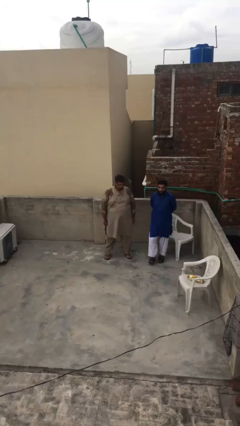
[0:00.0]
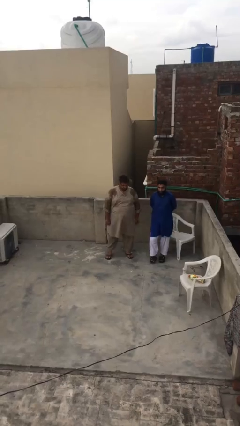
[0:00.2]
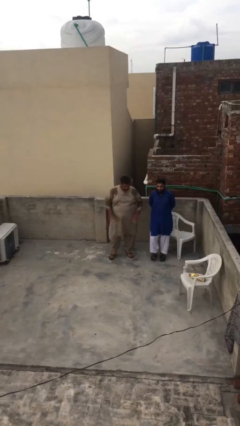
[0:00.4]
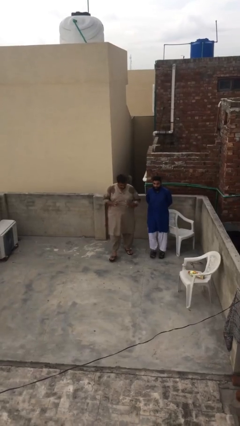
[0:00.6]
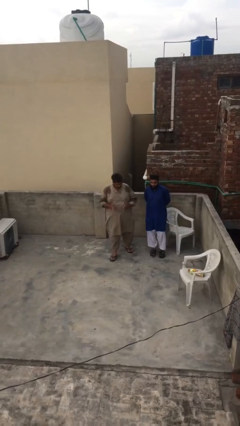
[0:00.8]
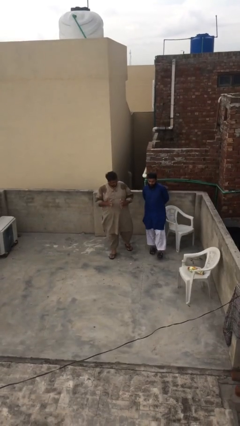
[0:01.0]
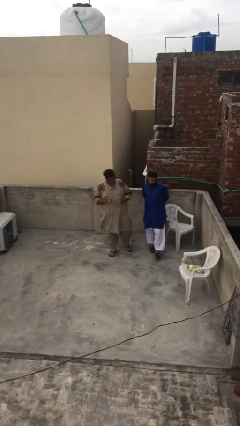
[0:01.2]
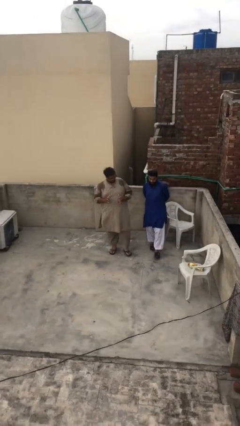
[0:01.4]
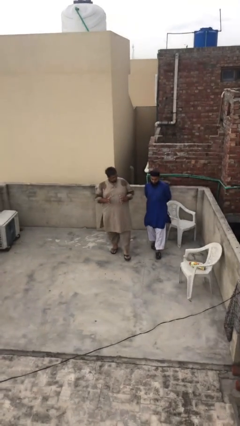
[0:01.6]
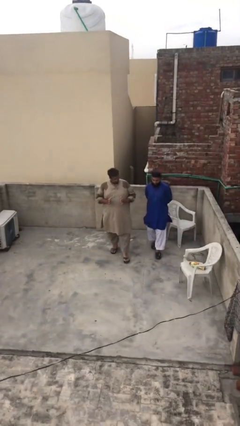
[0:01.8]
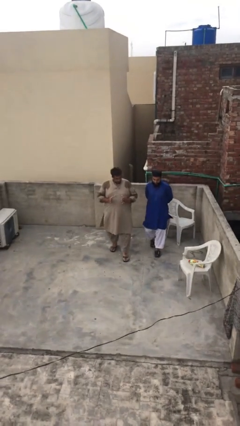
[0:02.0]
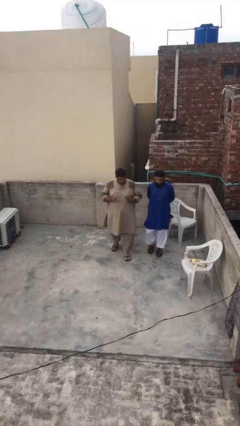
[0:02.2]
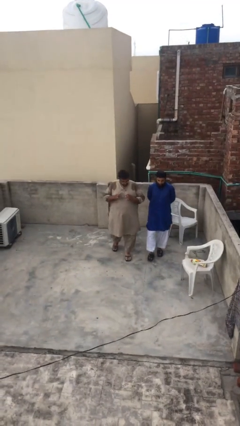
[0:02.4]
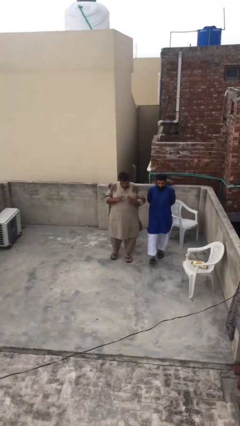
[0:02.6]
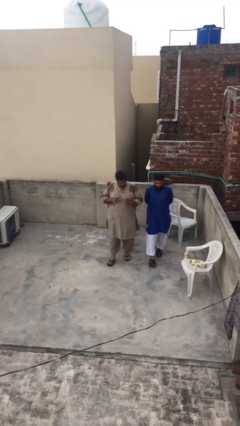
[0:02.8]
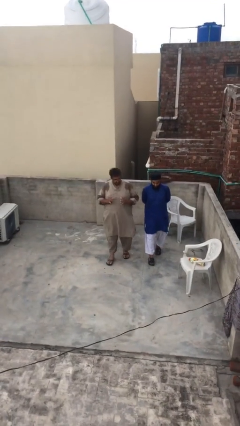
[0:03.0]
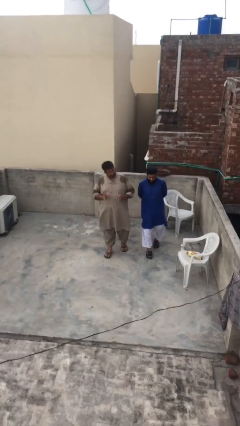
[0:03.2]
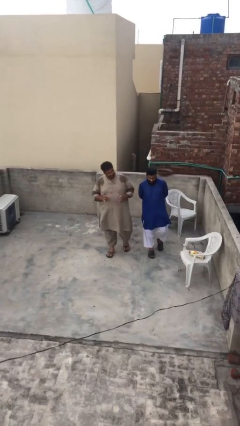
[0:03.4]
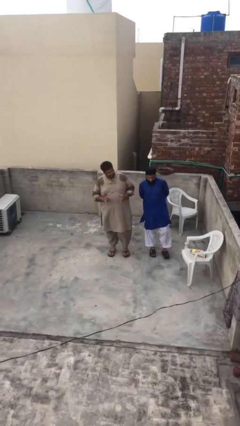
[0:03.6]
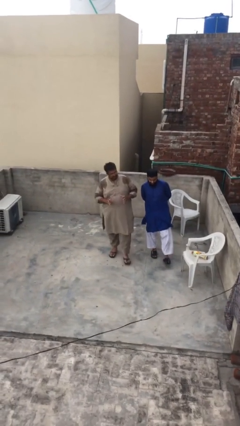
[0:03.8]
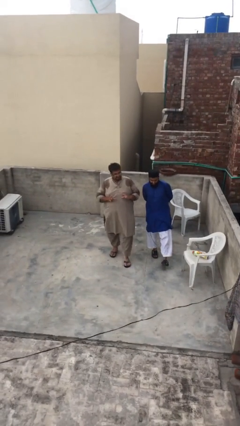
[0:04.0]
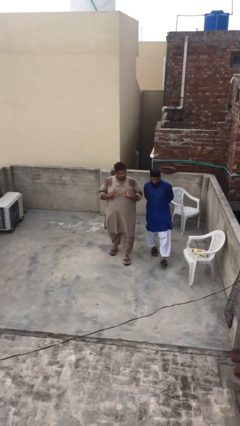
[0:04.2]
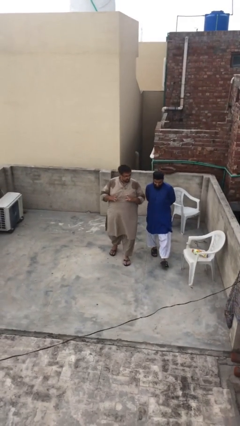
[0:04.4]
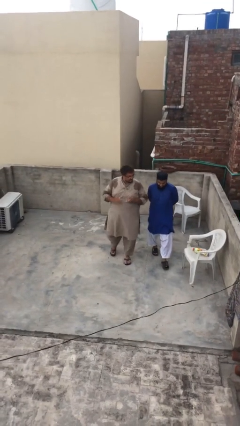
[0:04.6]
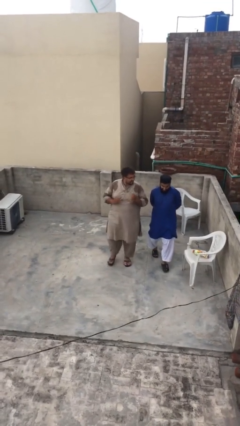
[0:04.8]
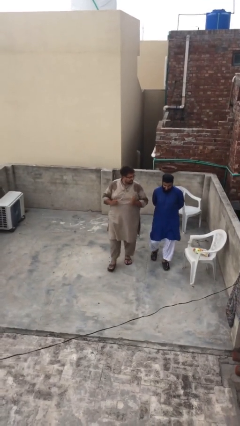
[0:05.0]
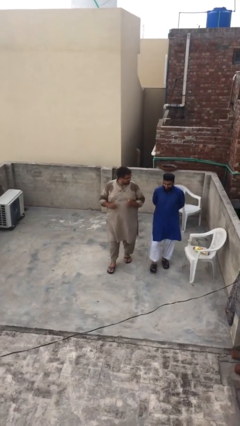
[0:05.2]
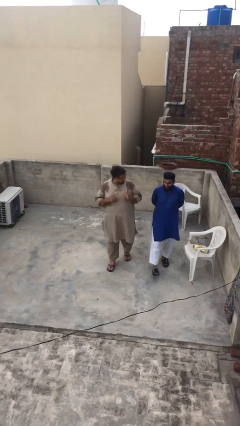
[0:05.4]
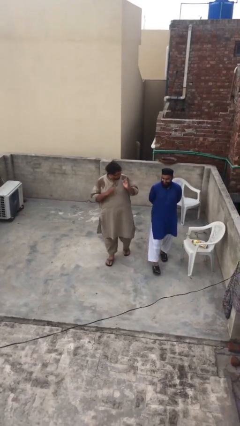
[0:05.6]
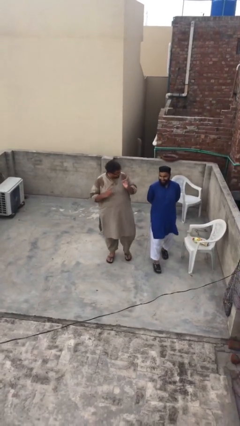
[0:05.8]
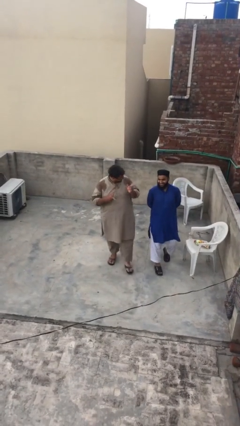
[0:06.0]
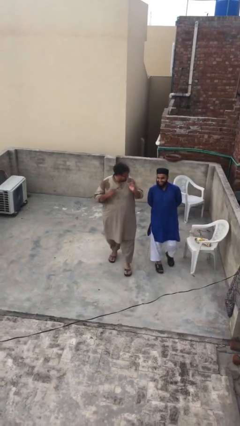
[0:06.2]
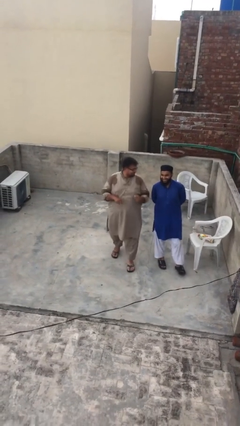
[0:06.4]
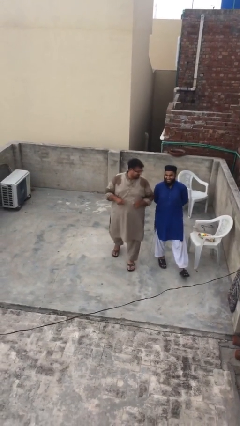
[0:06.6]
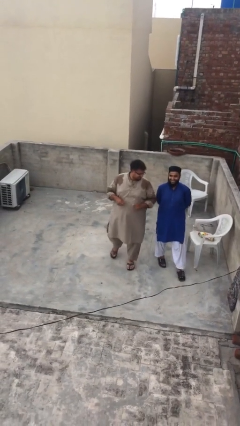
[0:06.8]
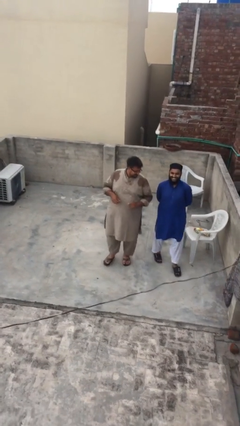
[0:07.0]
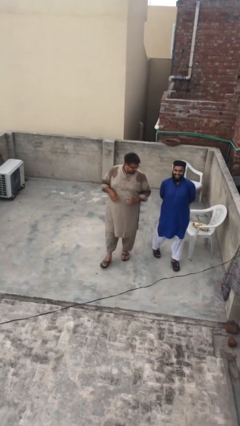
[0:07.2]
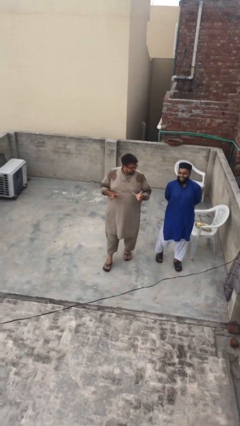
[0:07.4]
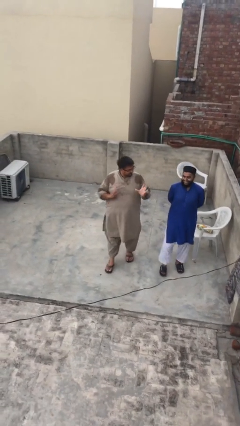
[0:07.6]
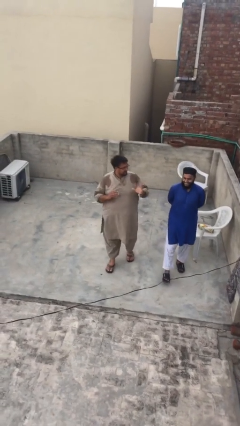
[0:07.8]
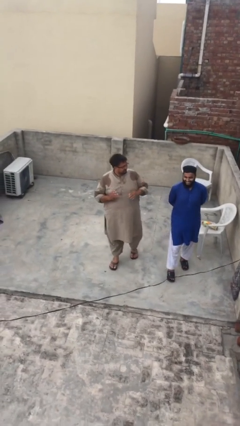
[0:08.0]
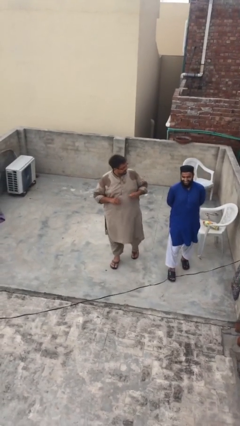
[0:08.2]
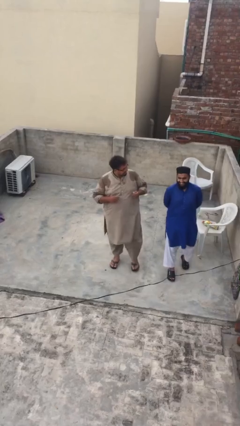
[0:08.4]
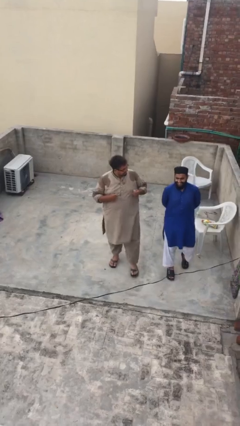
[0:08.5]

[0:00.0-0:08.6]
person talks to person

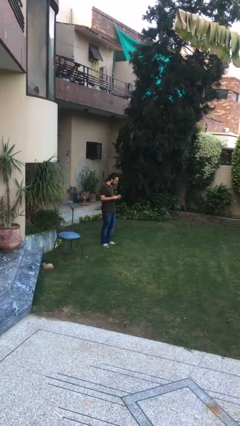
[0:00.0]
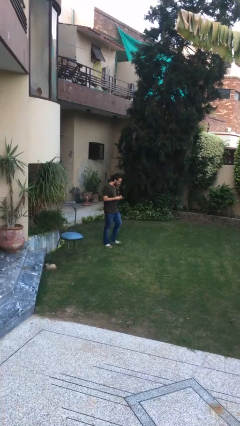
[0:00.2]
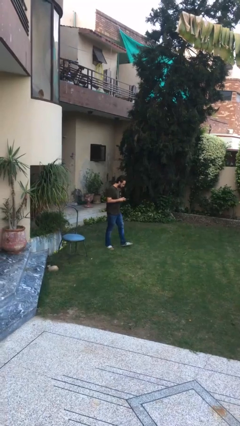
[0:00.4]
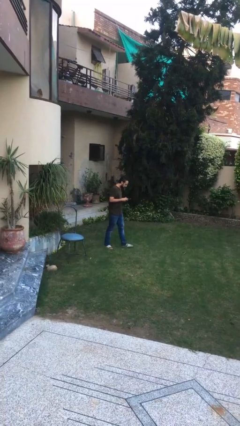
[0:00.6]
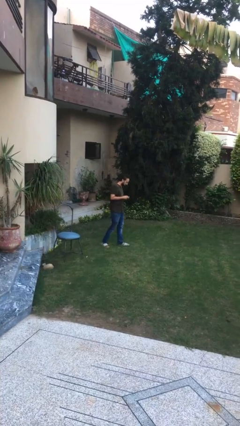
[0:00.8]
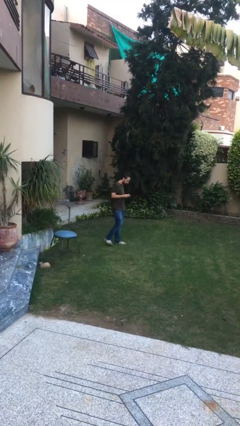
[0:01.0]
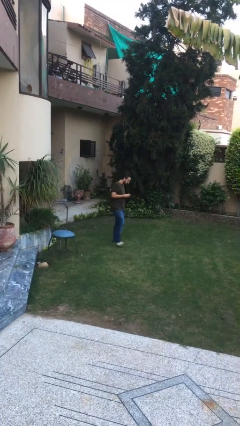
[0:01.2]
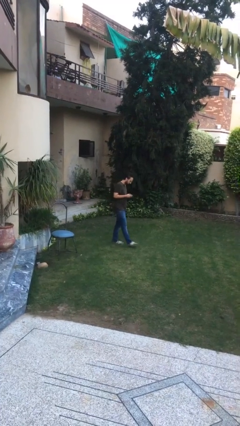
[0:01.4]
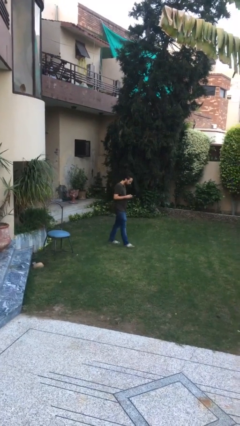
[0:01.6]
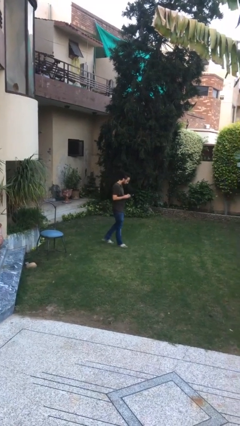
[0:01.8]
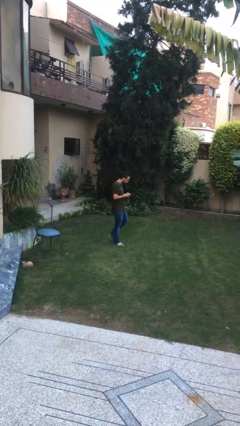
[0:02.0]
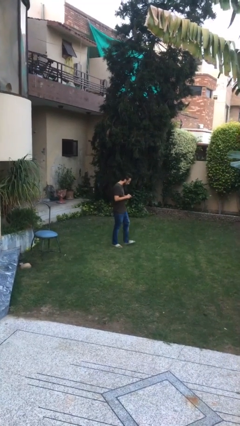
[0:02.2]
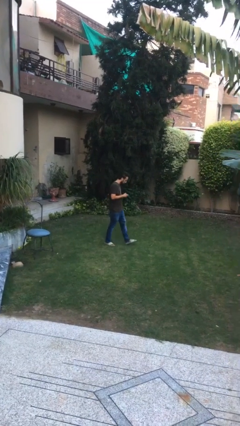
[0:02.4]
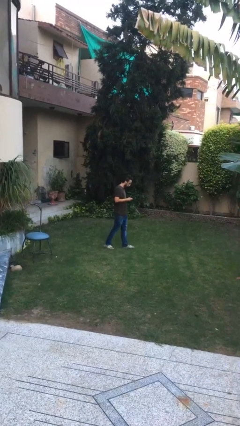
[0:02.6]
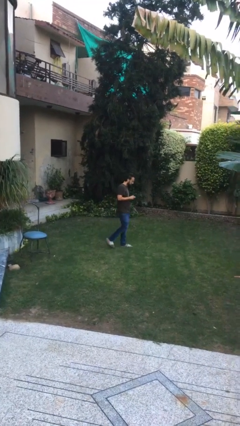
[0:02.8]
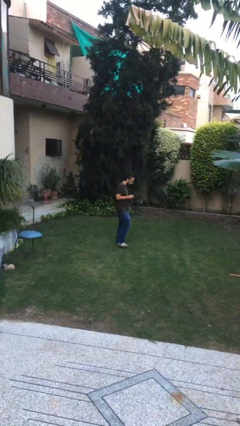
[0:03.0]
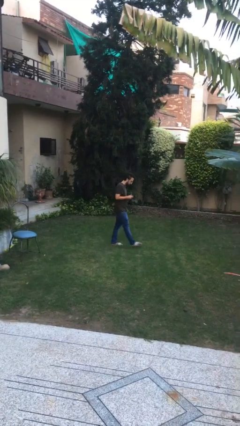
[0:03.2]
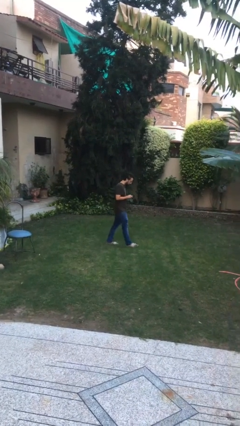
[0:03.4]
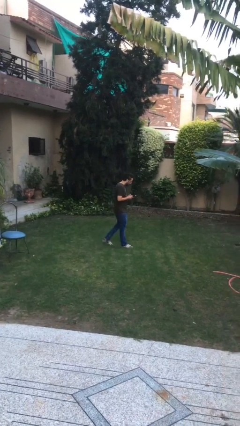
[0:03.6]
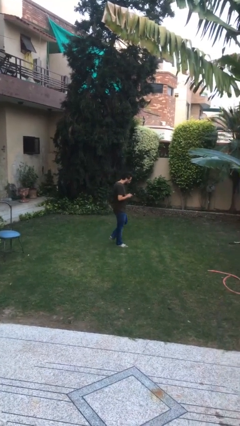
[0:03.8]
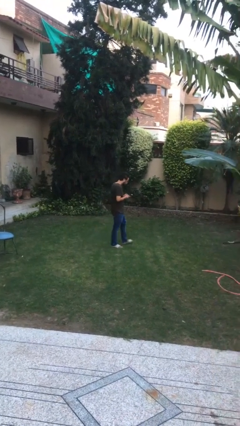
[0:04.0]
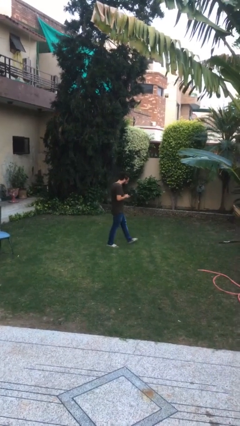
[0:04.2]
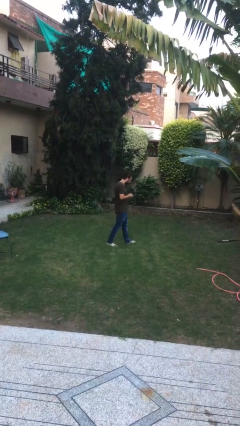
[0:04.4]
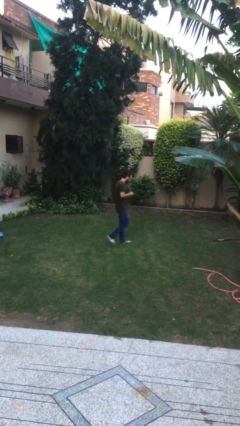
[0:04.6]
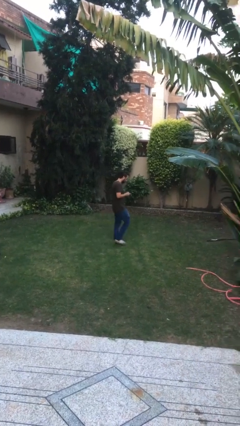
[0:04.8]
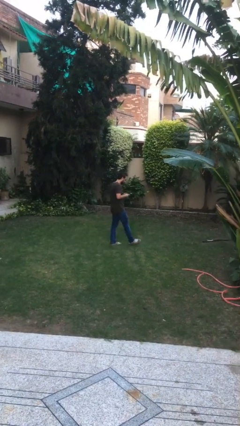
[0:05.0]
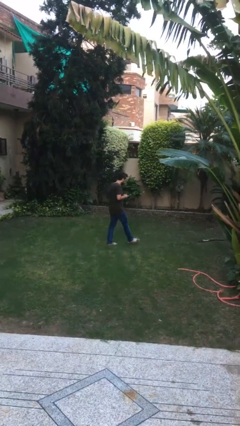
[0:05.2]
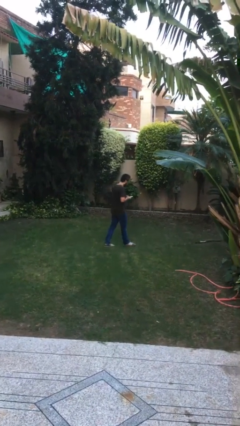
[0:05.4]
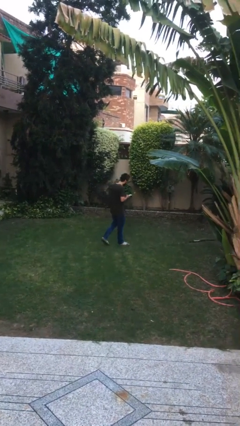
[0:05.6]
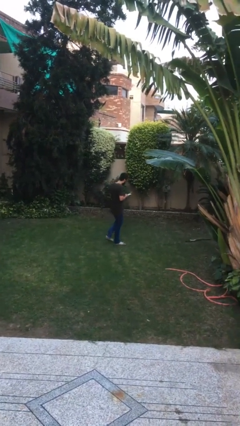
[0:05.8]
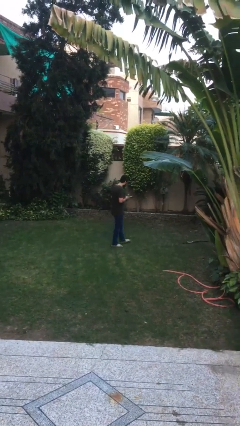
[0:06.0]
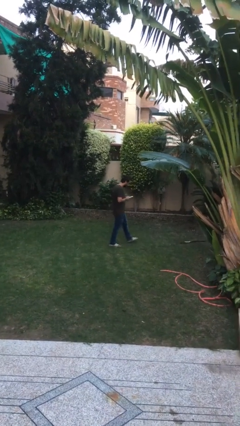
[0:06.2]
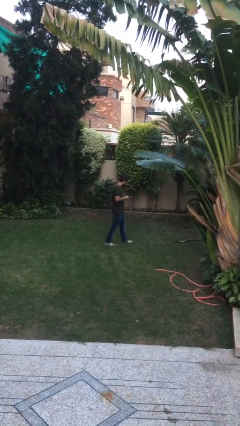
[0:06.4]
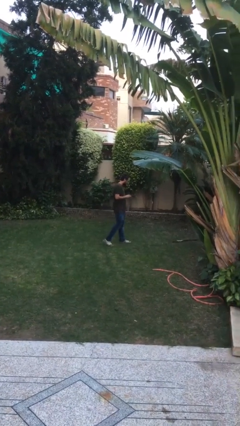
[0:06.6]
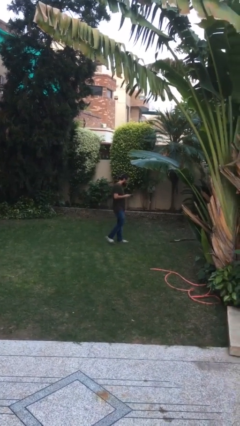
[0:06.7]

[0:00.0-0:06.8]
person texts on phone

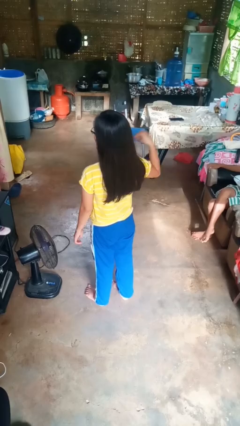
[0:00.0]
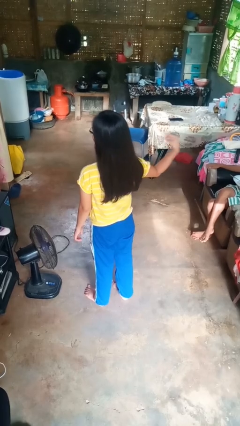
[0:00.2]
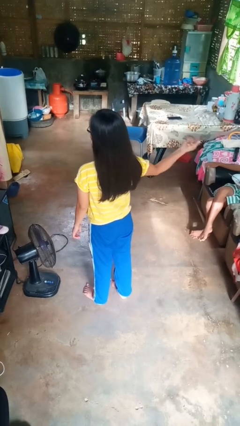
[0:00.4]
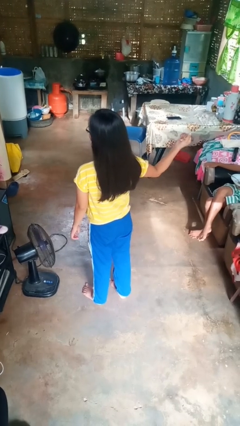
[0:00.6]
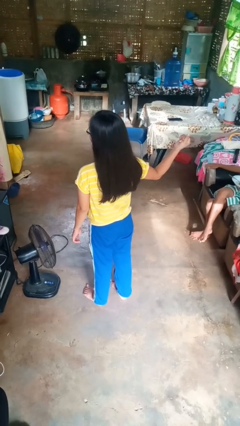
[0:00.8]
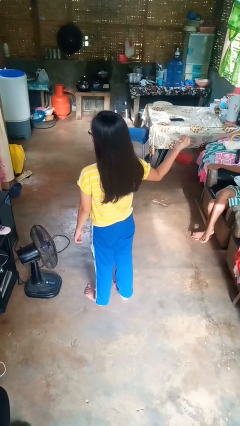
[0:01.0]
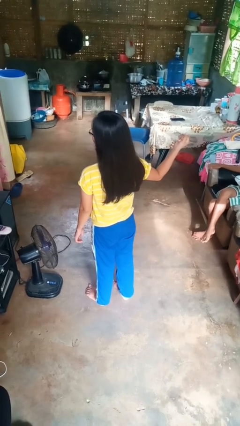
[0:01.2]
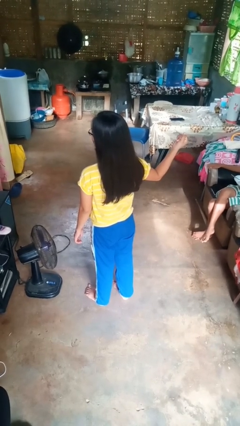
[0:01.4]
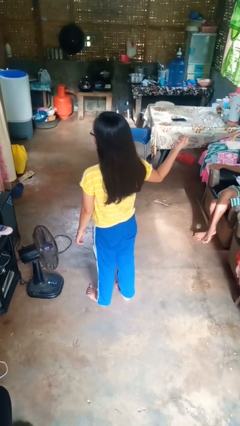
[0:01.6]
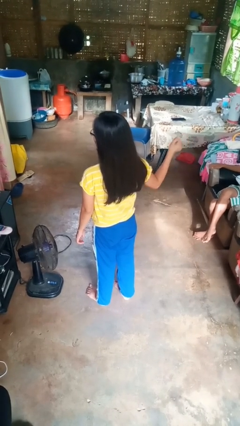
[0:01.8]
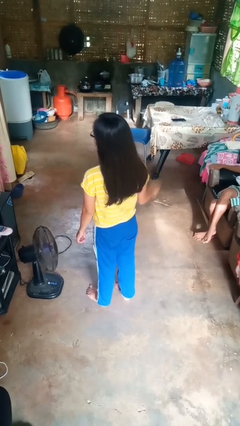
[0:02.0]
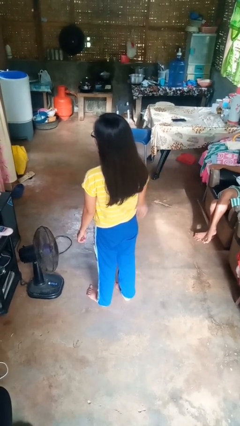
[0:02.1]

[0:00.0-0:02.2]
person snaps fingers

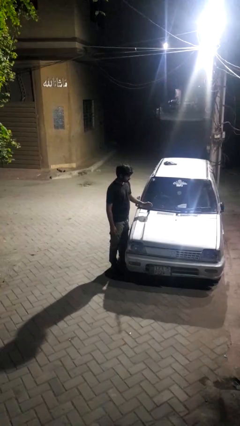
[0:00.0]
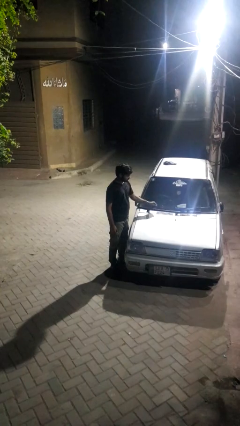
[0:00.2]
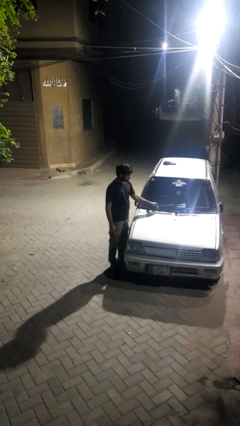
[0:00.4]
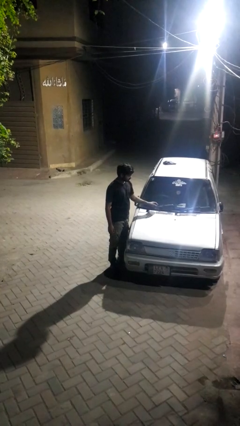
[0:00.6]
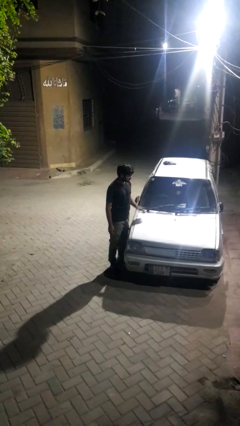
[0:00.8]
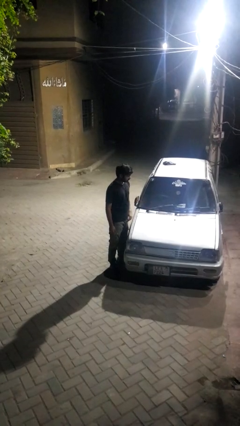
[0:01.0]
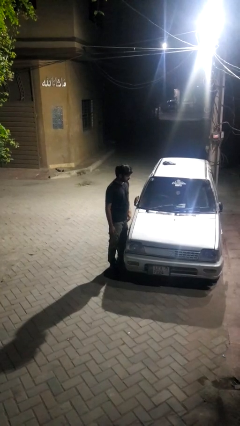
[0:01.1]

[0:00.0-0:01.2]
person flips down car wipers
